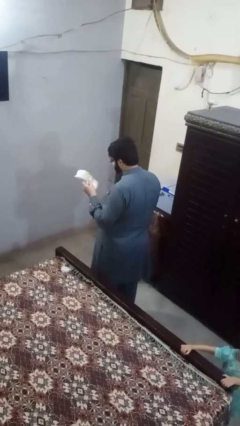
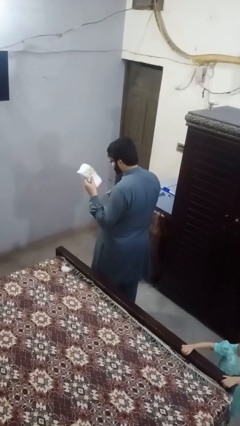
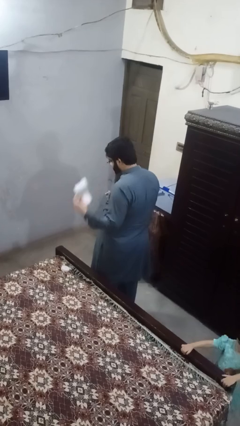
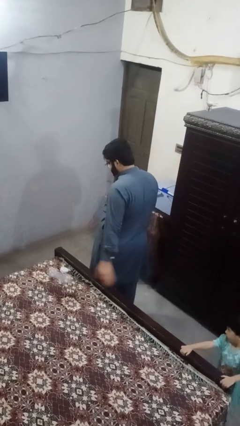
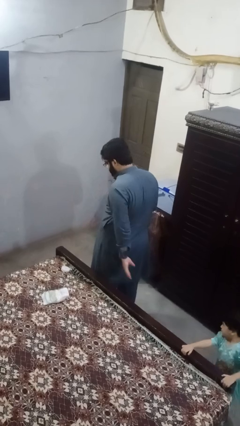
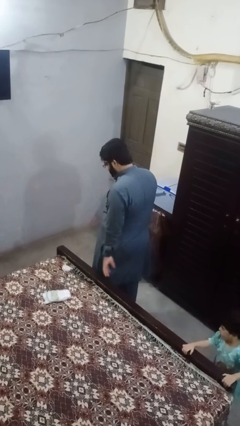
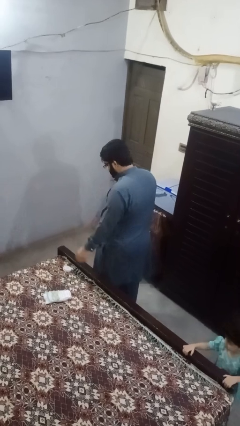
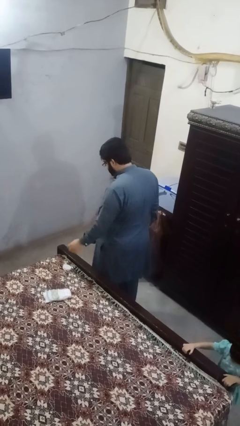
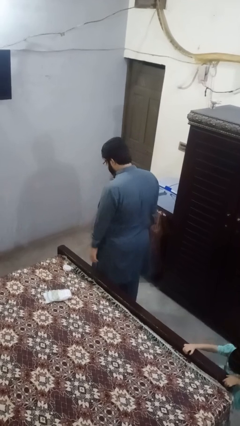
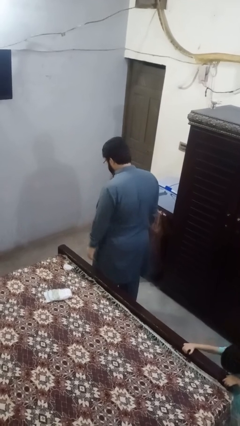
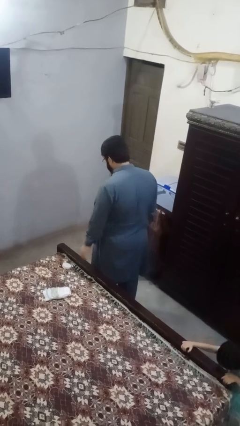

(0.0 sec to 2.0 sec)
person throws object on bed

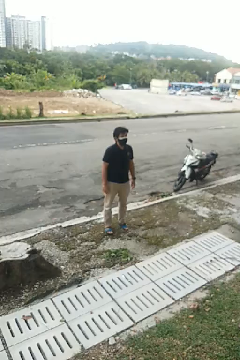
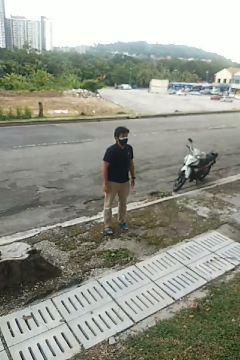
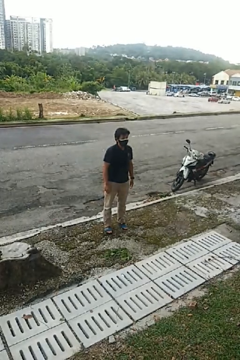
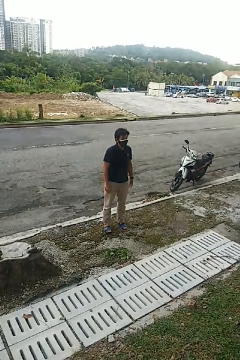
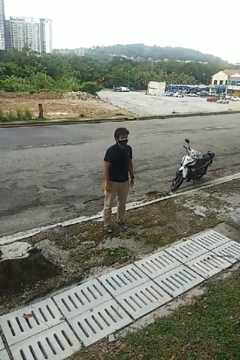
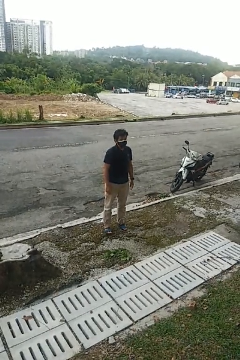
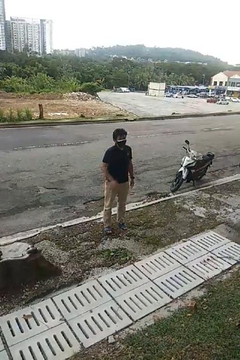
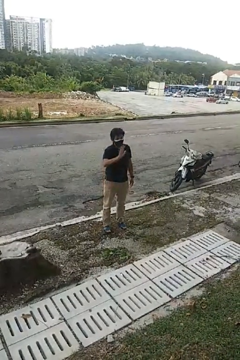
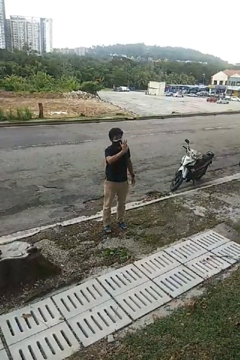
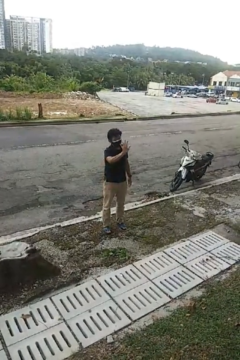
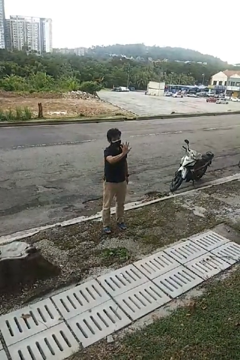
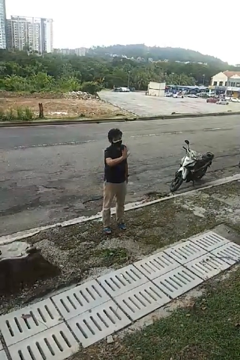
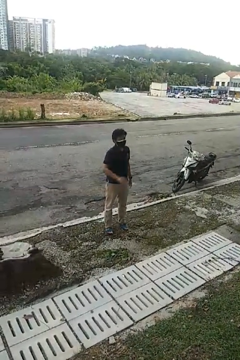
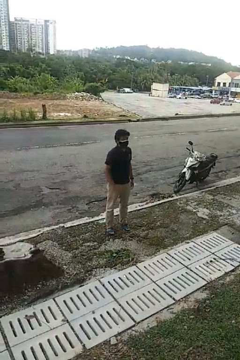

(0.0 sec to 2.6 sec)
person gestures number five

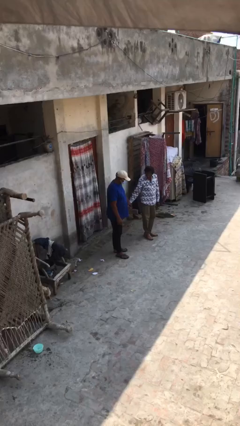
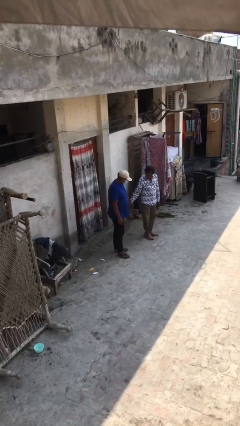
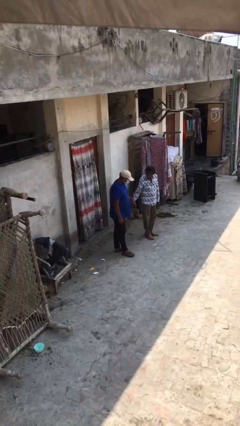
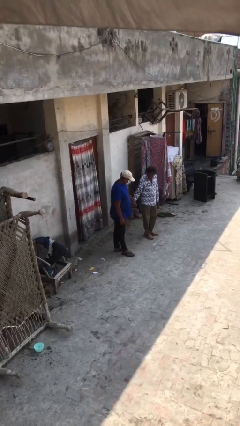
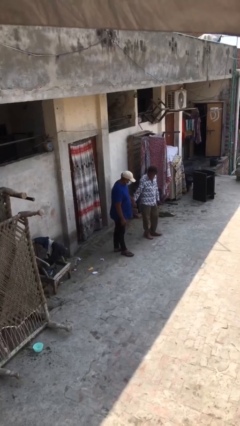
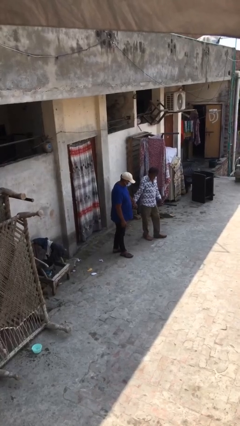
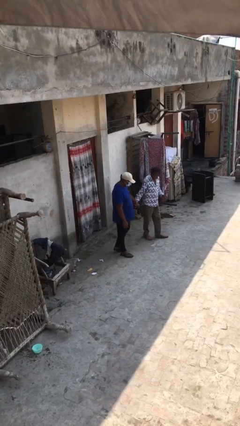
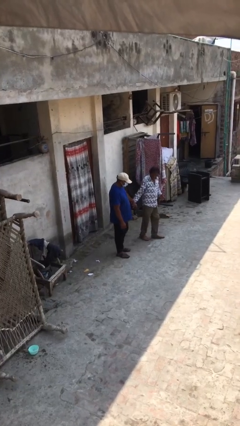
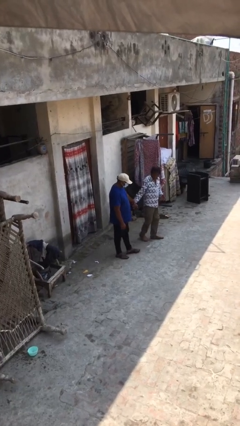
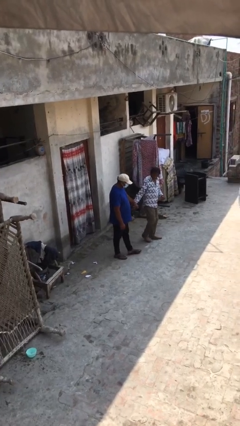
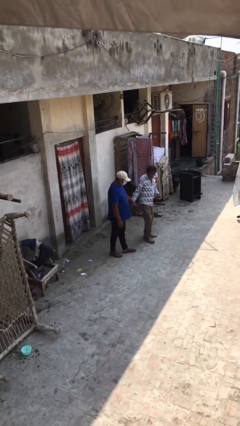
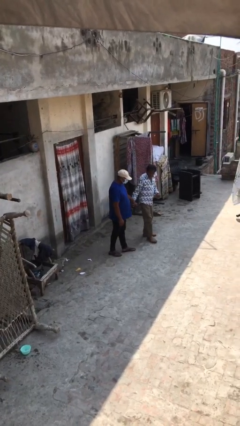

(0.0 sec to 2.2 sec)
person holds hand

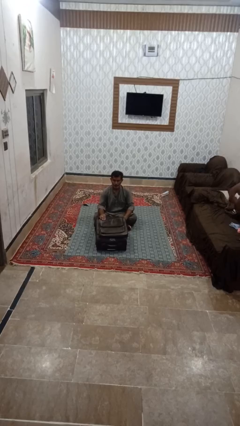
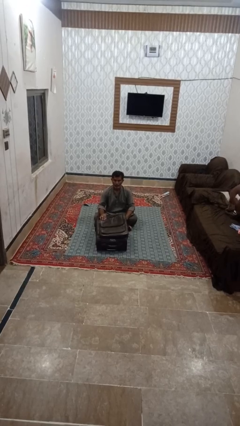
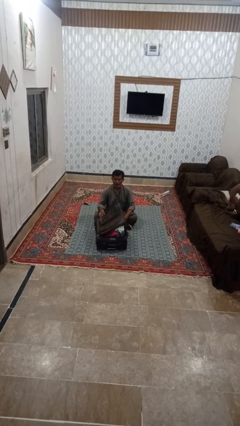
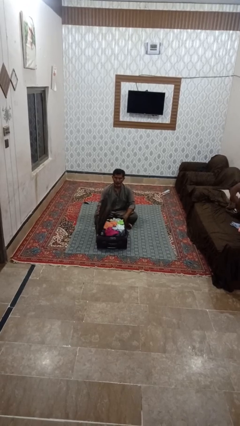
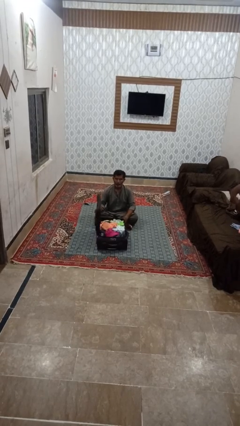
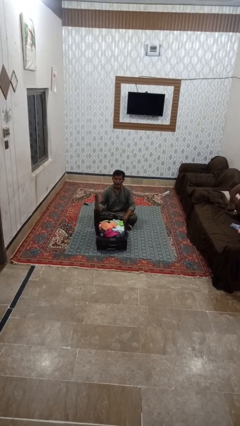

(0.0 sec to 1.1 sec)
person opens clothes washer

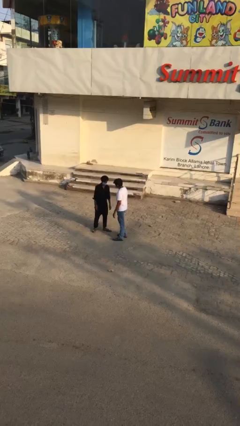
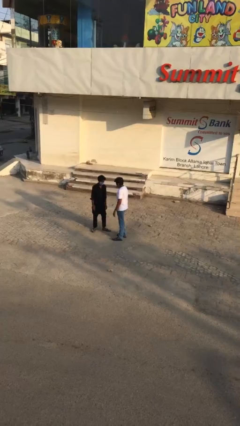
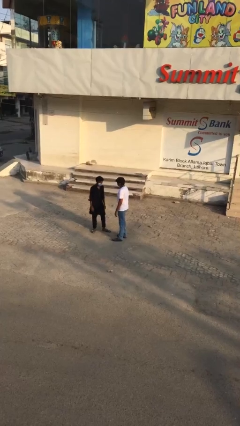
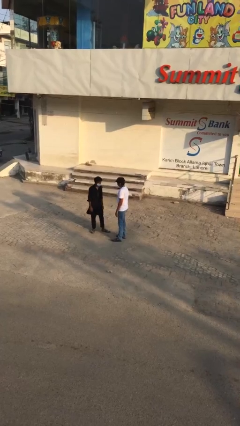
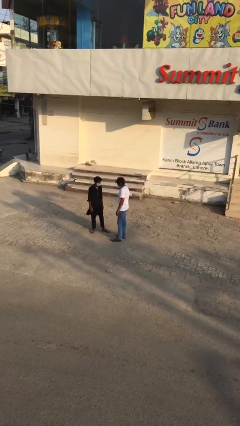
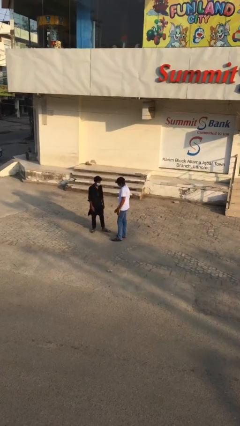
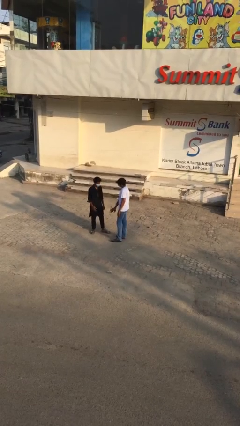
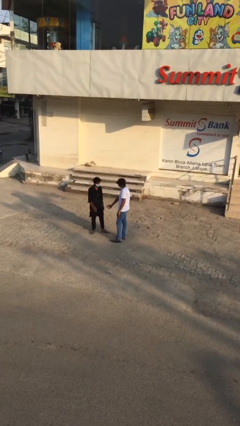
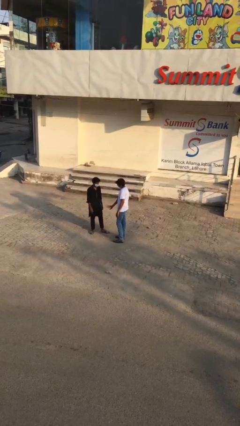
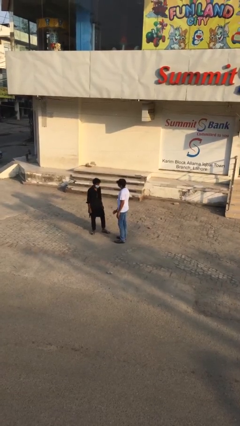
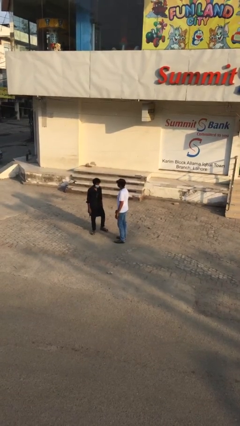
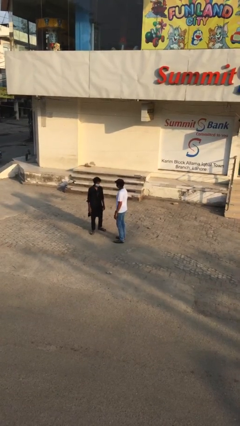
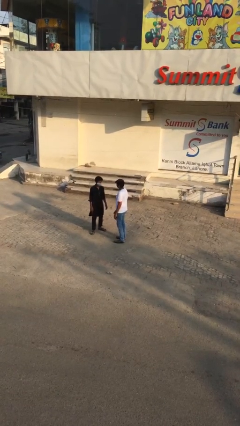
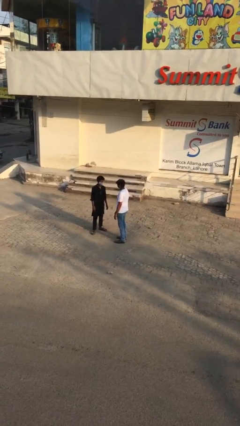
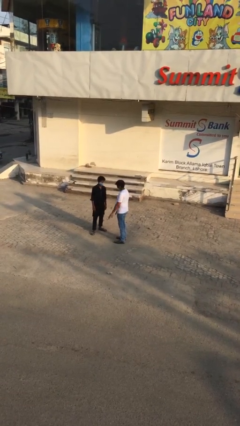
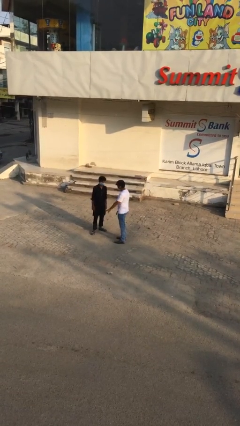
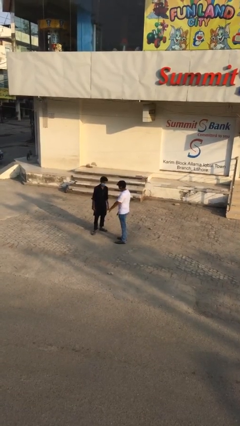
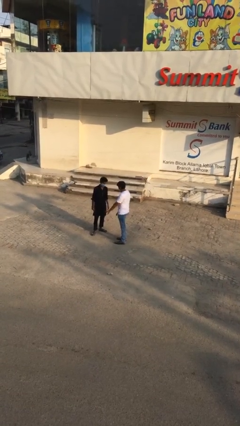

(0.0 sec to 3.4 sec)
person talks to person

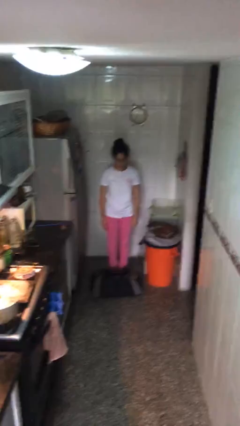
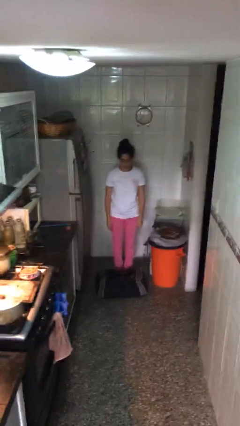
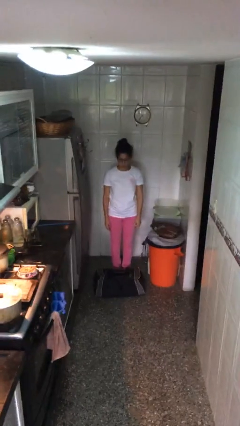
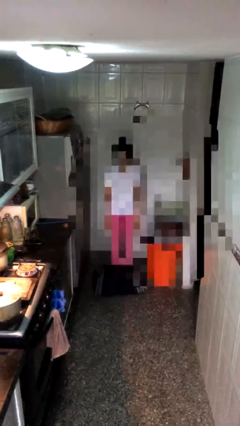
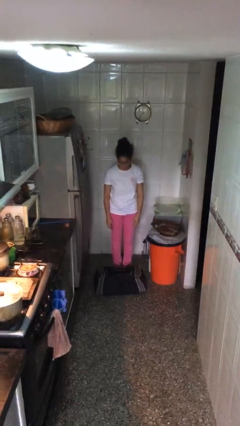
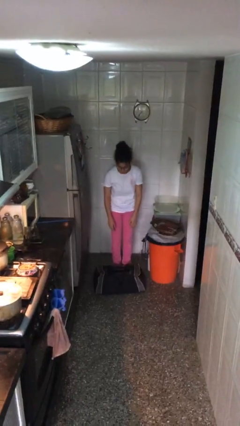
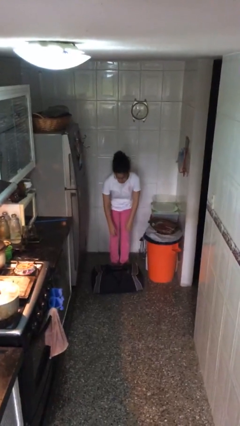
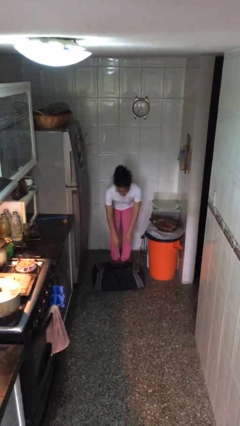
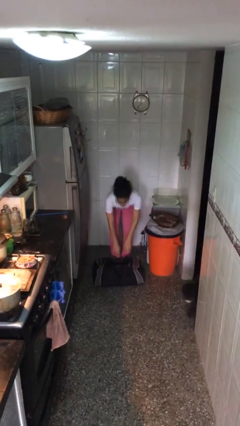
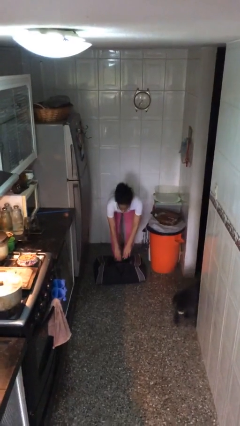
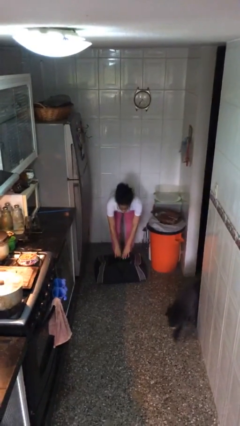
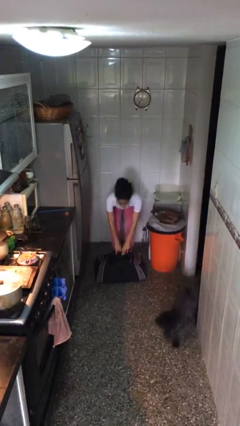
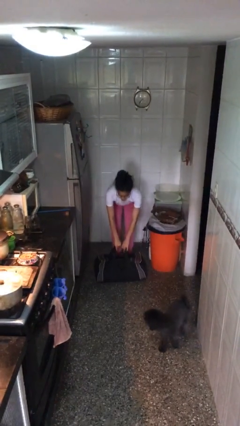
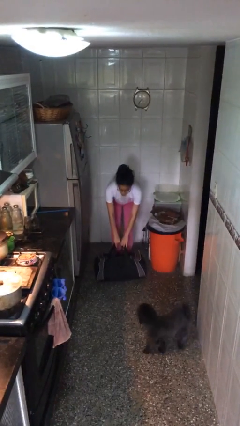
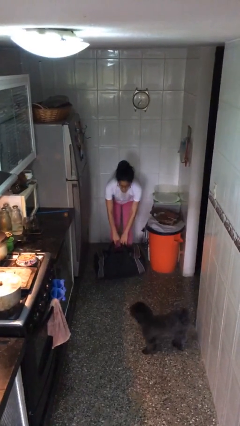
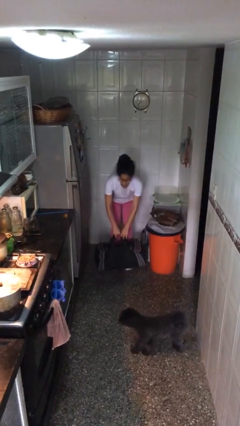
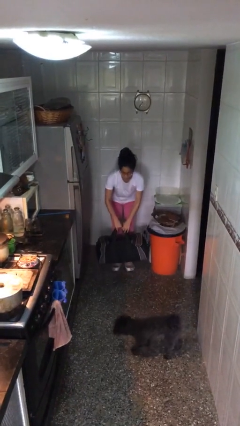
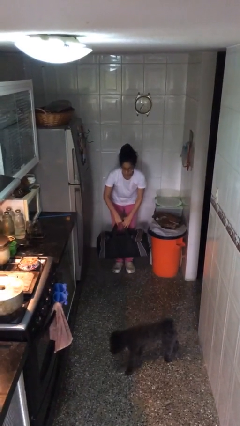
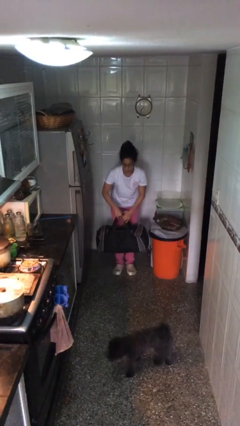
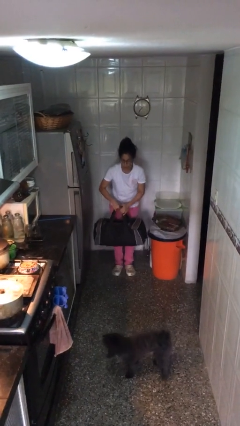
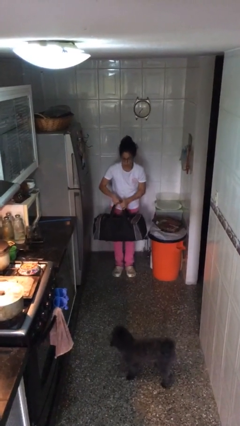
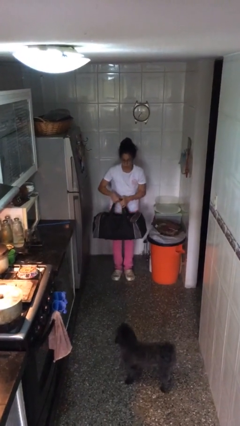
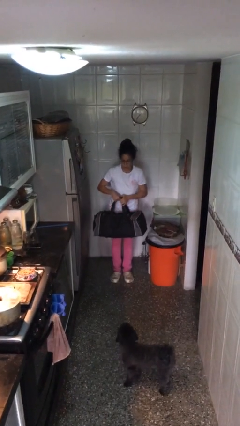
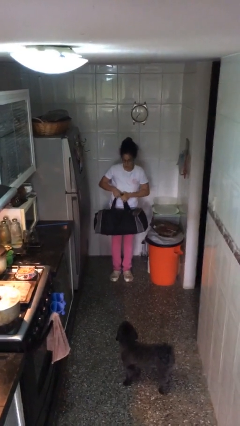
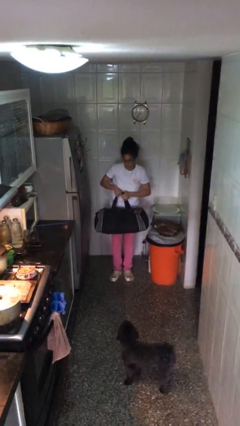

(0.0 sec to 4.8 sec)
person picks up object from floor

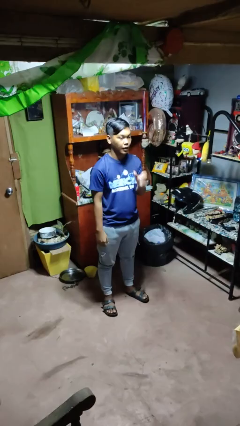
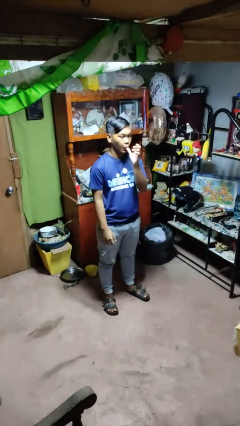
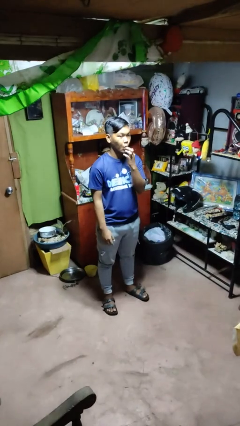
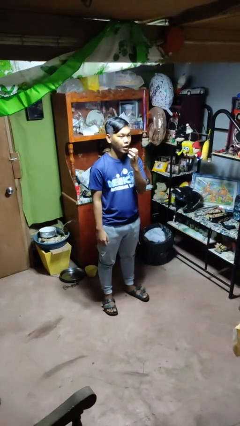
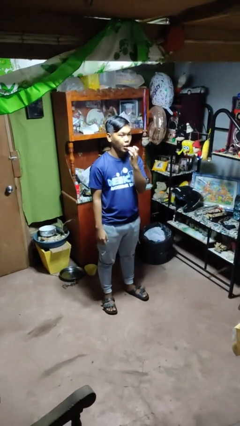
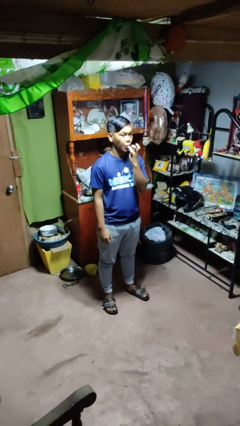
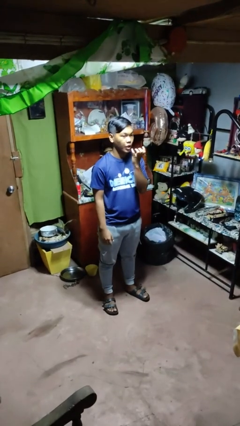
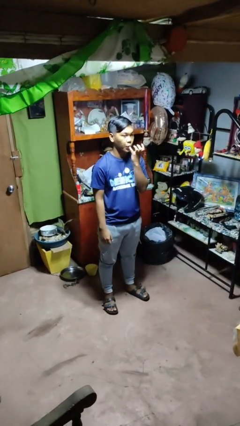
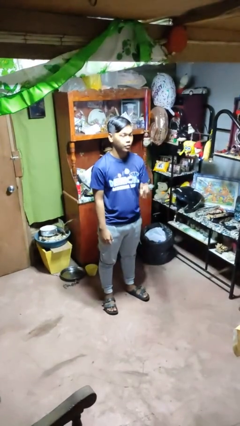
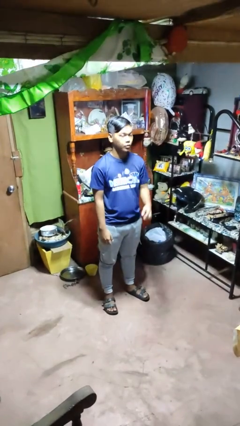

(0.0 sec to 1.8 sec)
person licks fingers
